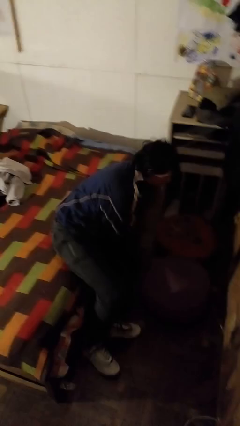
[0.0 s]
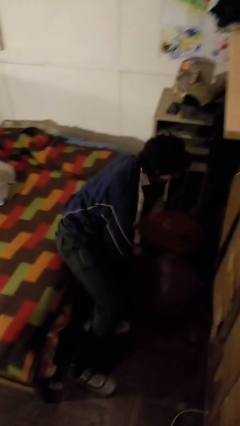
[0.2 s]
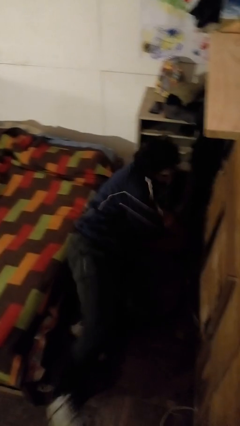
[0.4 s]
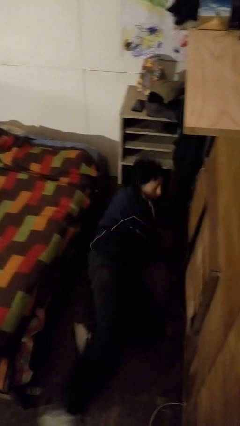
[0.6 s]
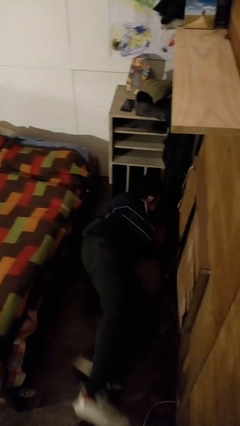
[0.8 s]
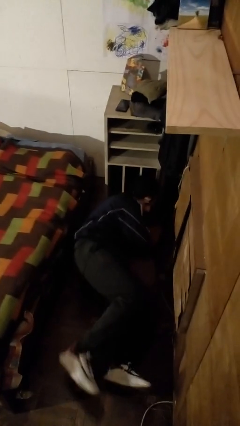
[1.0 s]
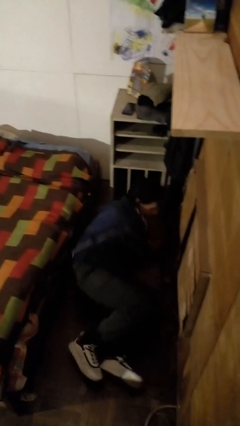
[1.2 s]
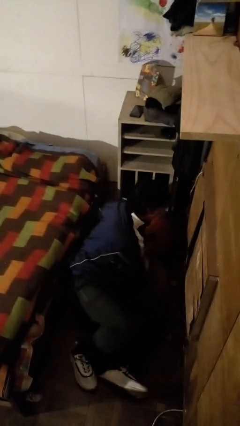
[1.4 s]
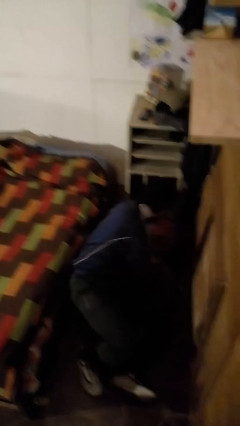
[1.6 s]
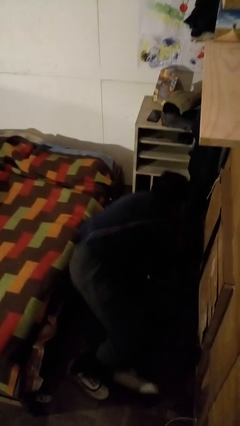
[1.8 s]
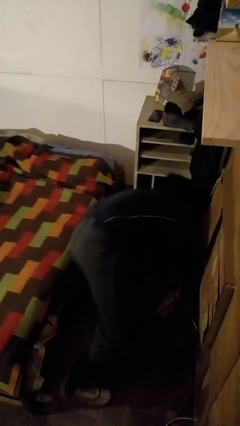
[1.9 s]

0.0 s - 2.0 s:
person falls from bed

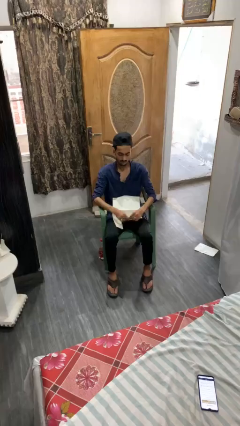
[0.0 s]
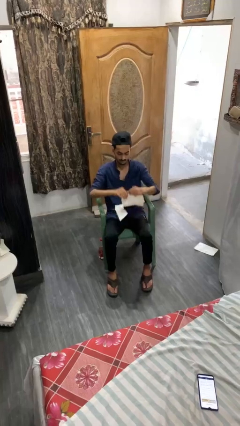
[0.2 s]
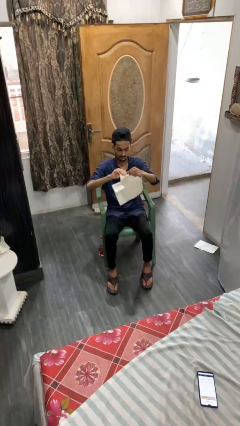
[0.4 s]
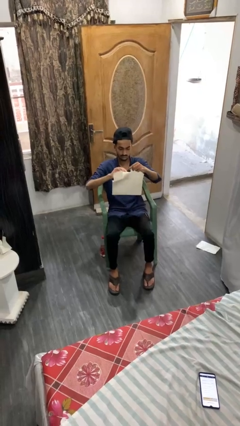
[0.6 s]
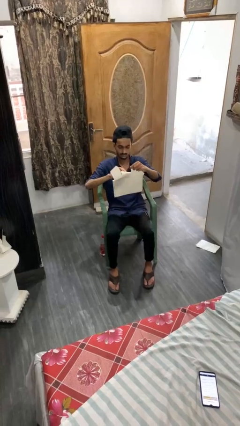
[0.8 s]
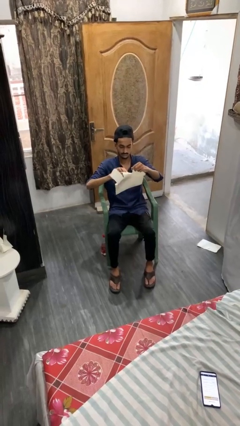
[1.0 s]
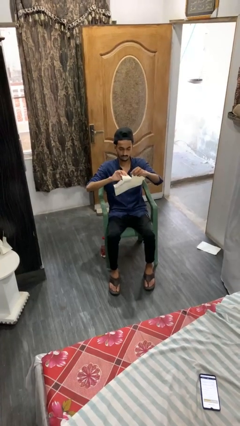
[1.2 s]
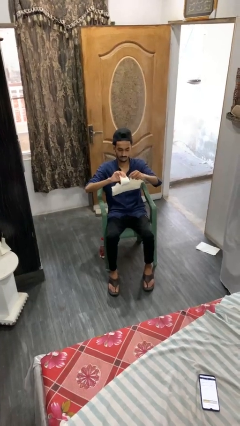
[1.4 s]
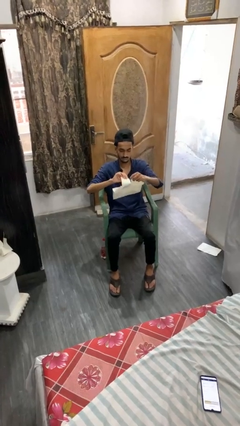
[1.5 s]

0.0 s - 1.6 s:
person tears paper

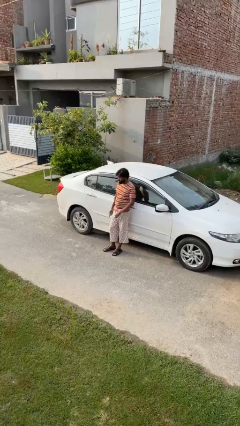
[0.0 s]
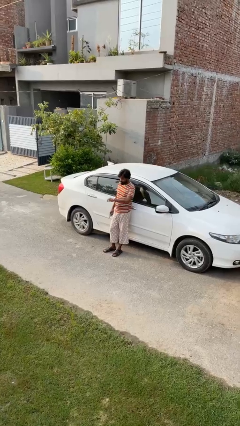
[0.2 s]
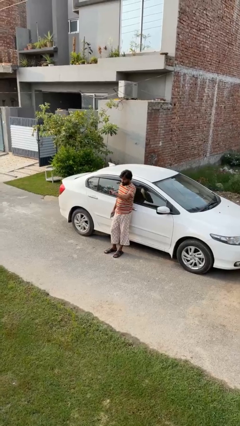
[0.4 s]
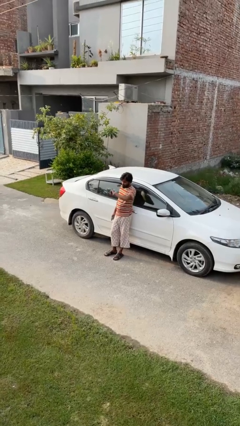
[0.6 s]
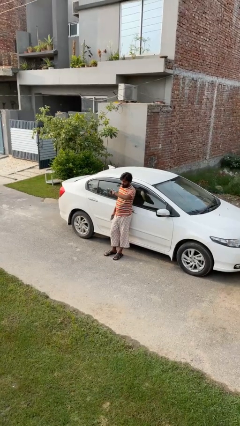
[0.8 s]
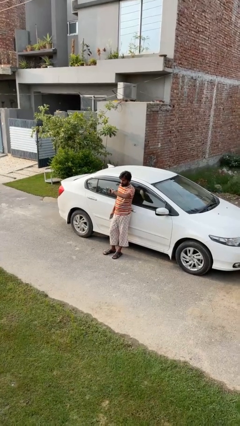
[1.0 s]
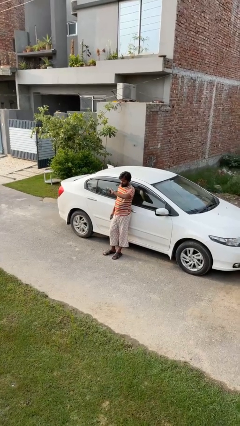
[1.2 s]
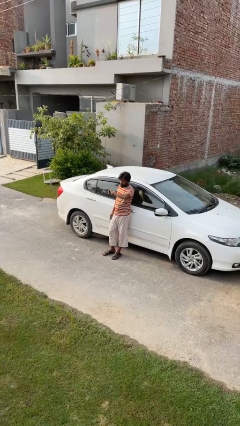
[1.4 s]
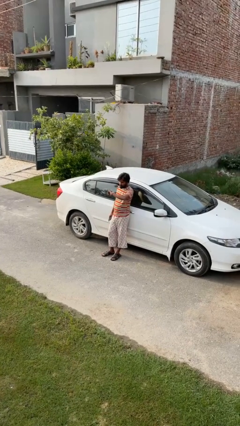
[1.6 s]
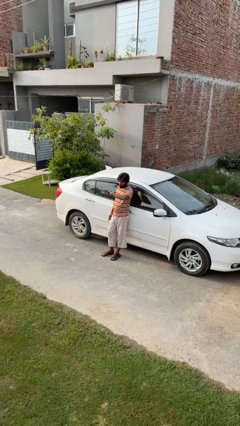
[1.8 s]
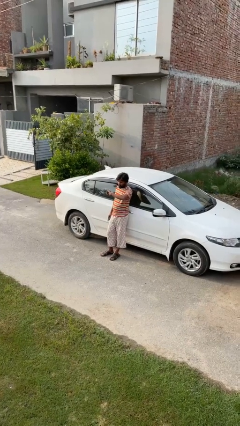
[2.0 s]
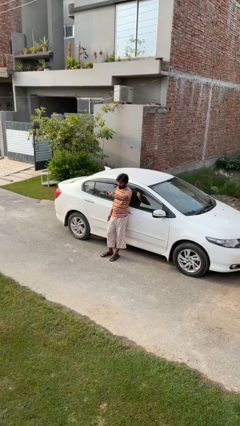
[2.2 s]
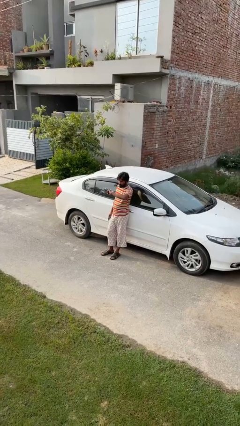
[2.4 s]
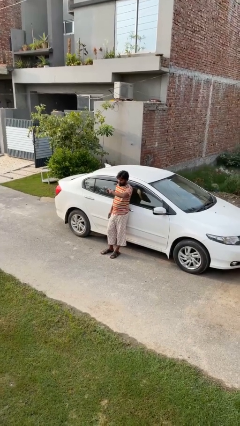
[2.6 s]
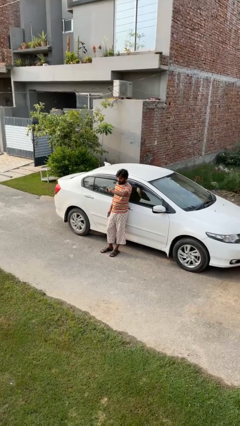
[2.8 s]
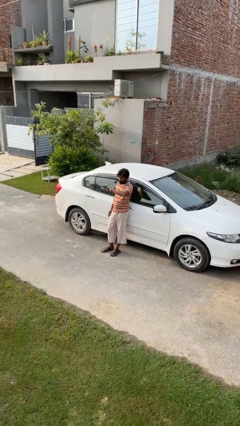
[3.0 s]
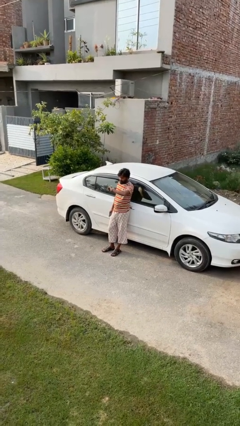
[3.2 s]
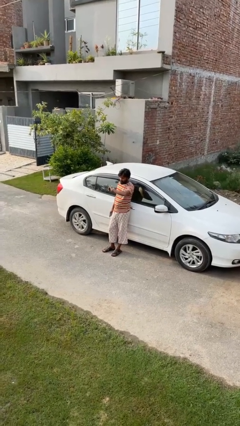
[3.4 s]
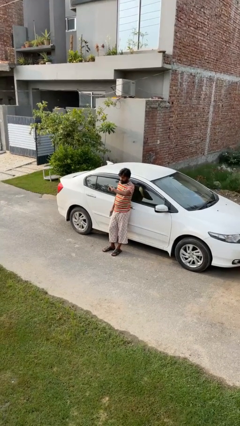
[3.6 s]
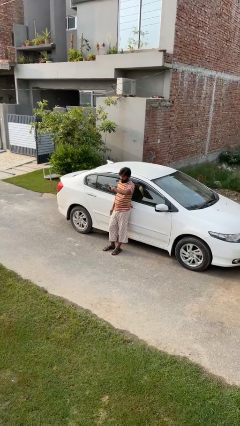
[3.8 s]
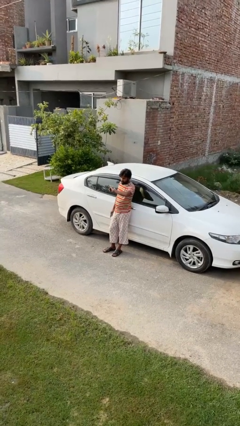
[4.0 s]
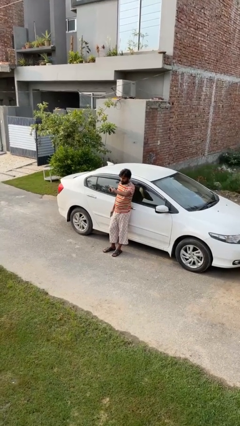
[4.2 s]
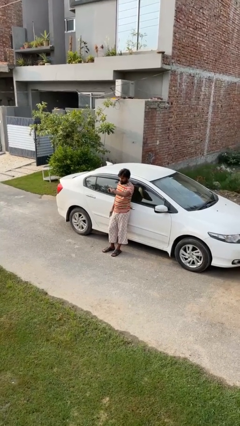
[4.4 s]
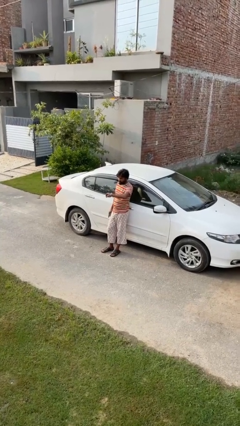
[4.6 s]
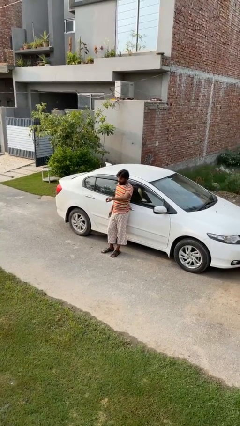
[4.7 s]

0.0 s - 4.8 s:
person looks at wristwatch

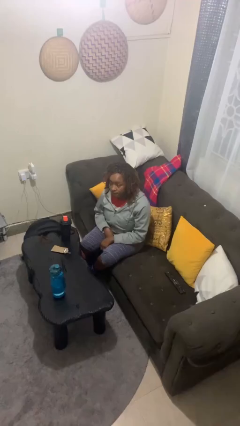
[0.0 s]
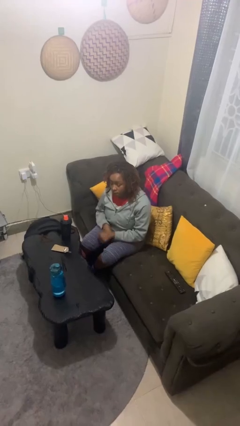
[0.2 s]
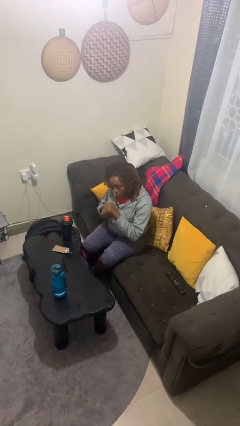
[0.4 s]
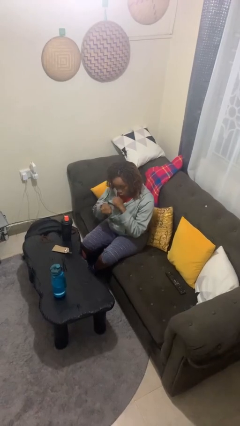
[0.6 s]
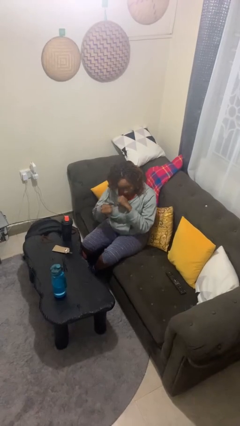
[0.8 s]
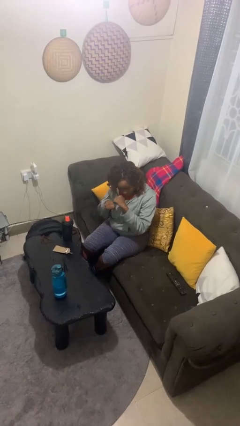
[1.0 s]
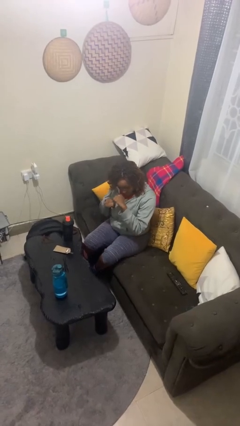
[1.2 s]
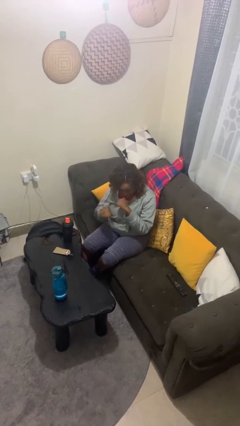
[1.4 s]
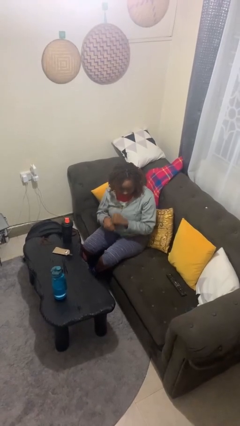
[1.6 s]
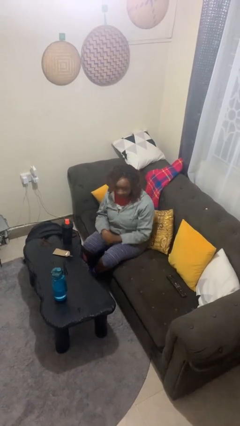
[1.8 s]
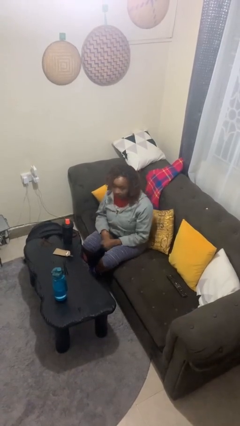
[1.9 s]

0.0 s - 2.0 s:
person punches

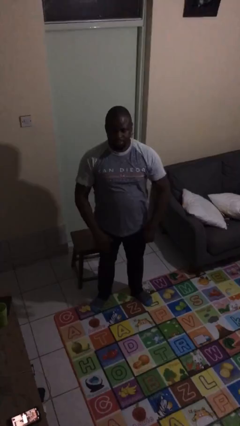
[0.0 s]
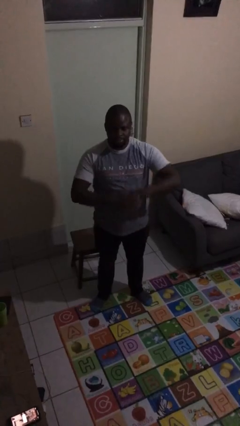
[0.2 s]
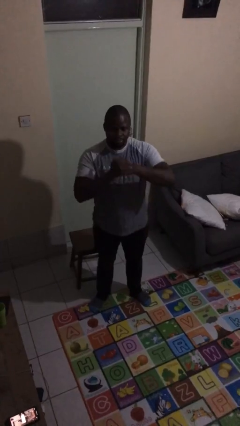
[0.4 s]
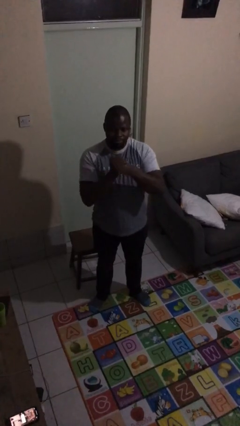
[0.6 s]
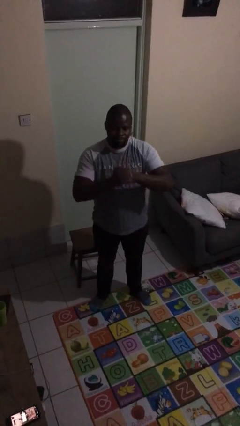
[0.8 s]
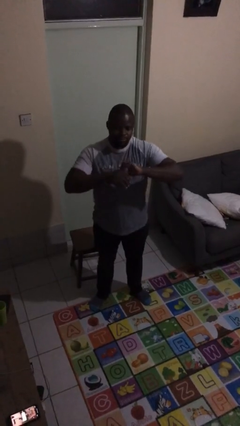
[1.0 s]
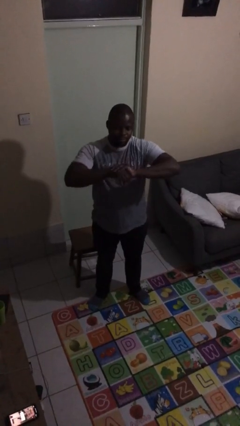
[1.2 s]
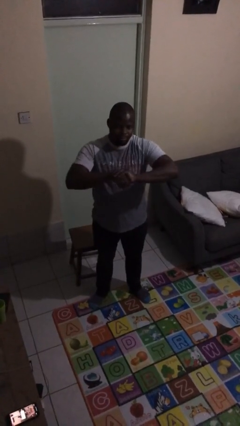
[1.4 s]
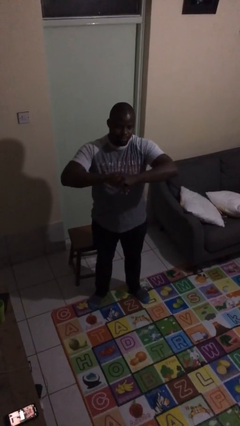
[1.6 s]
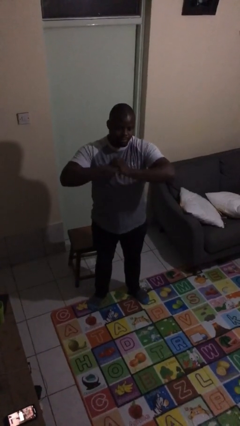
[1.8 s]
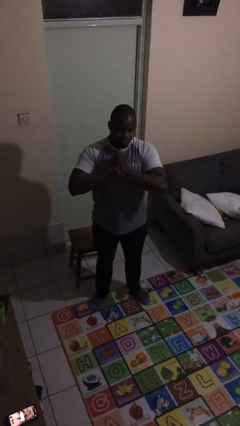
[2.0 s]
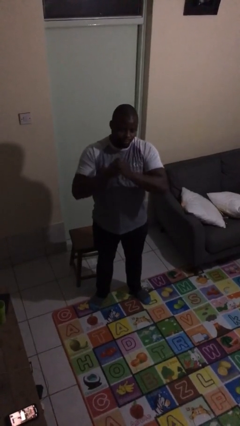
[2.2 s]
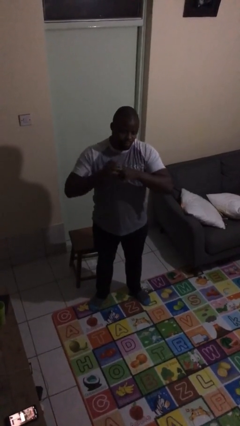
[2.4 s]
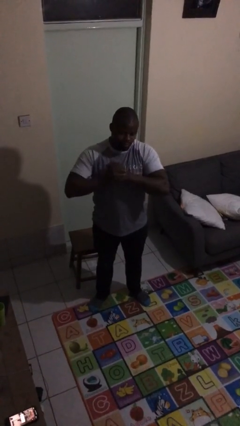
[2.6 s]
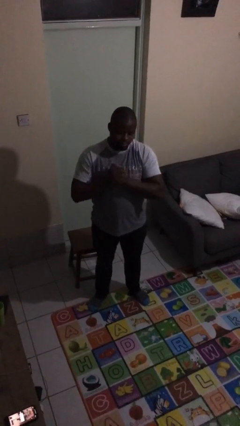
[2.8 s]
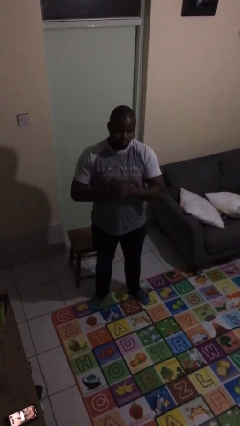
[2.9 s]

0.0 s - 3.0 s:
person cracks knuckles

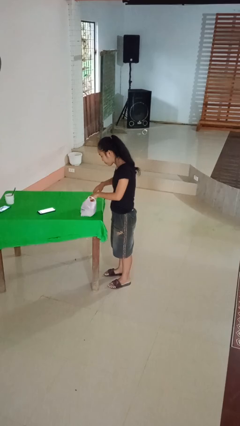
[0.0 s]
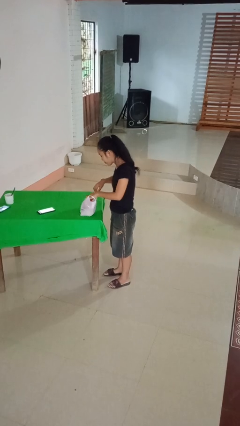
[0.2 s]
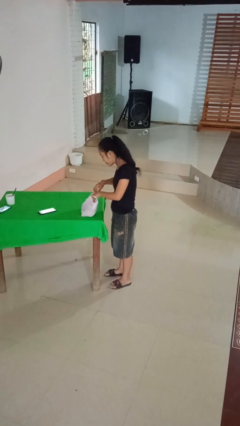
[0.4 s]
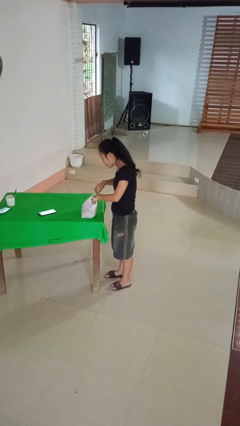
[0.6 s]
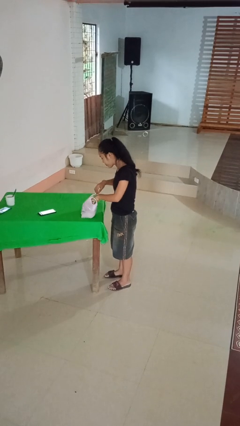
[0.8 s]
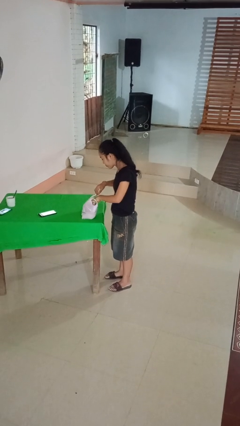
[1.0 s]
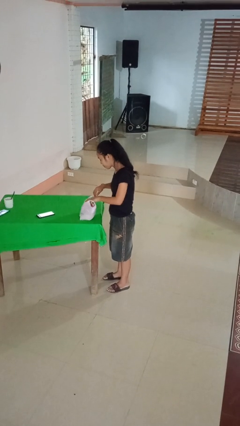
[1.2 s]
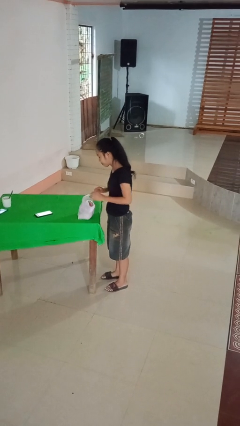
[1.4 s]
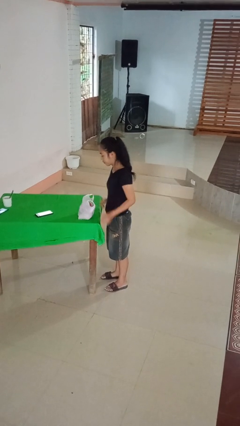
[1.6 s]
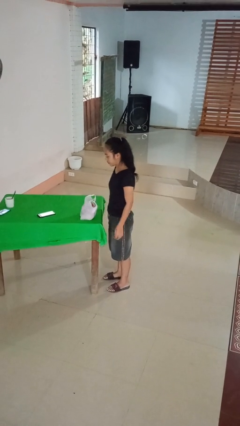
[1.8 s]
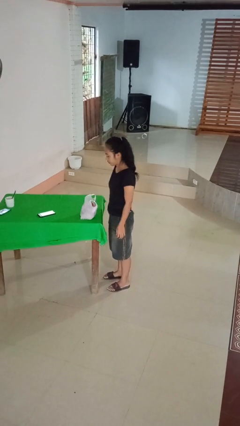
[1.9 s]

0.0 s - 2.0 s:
person searches in bag

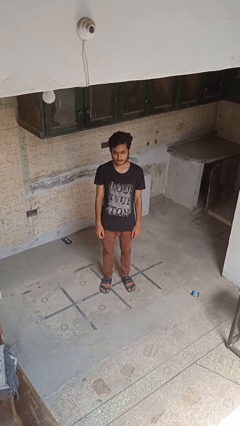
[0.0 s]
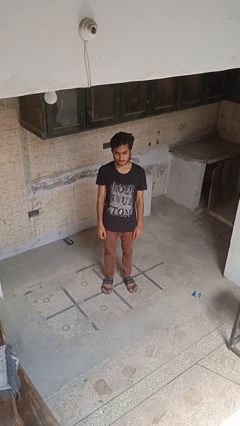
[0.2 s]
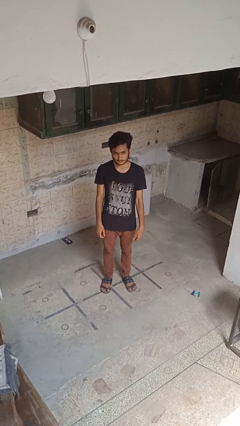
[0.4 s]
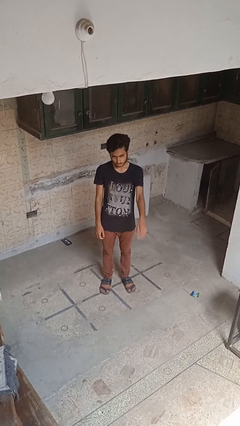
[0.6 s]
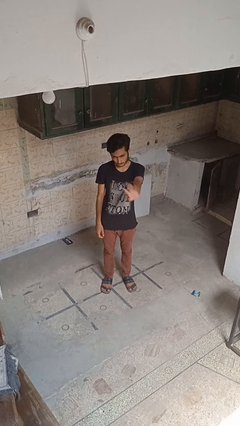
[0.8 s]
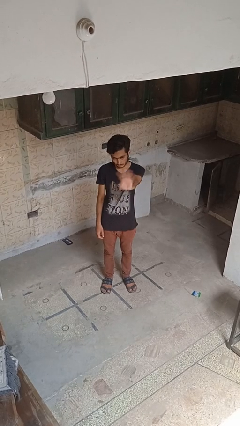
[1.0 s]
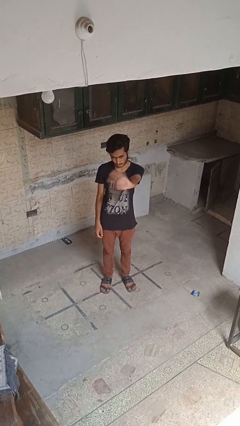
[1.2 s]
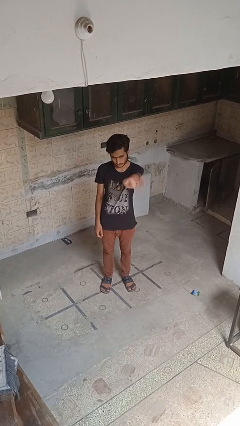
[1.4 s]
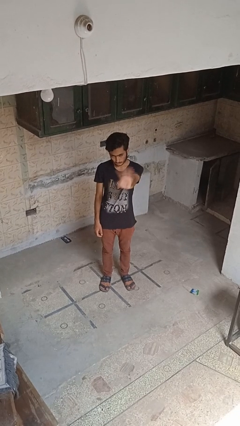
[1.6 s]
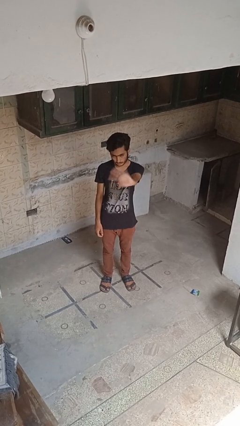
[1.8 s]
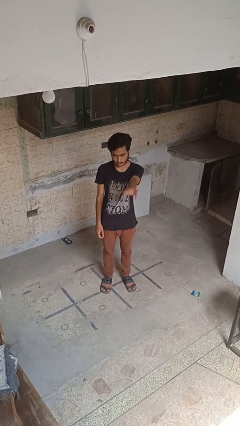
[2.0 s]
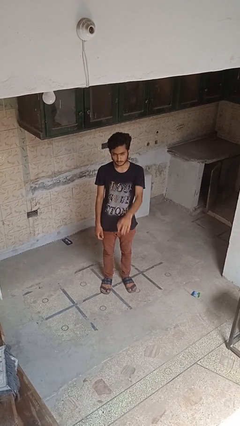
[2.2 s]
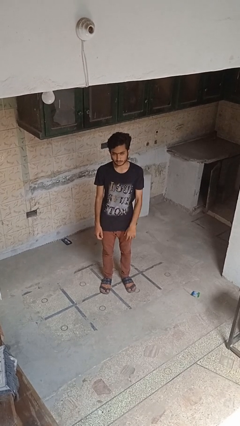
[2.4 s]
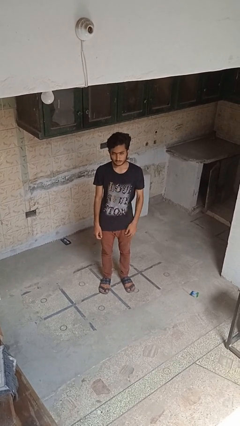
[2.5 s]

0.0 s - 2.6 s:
person waves at person
